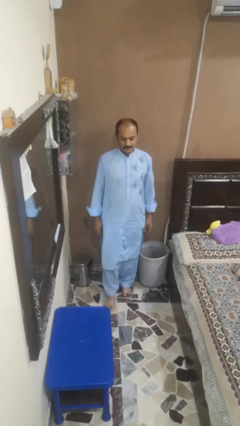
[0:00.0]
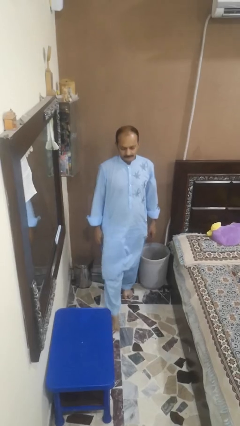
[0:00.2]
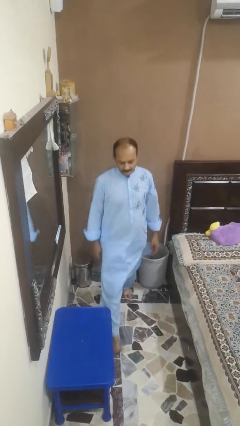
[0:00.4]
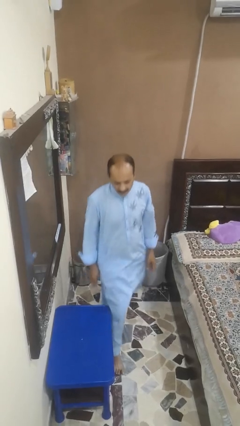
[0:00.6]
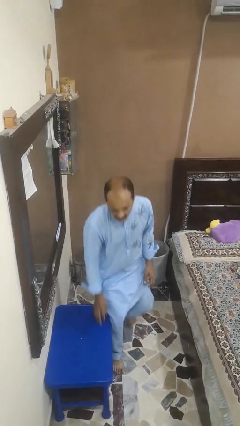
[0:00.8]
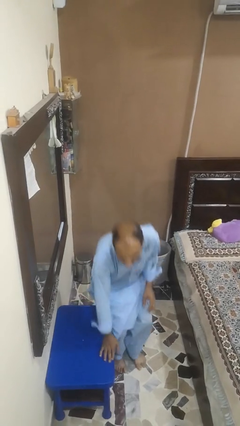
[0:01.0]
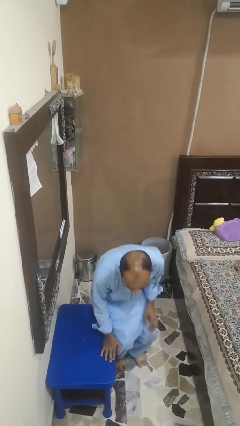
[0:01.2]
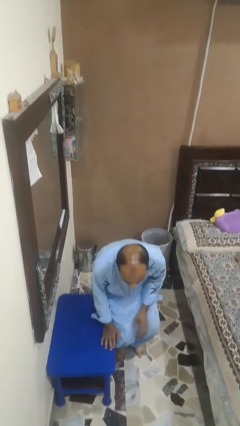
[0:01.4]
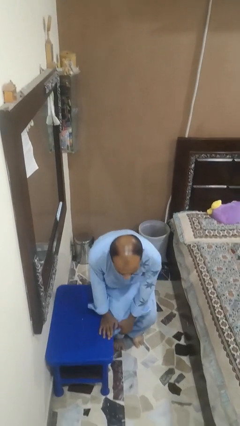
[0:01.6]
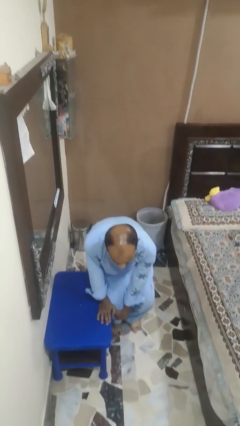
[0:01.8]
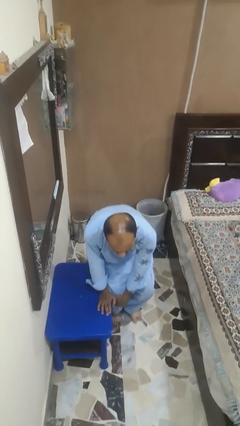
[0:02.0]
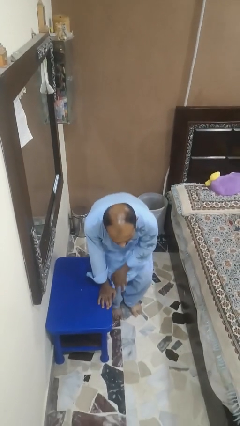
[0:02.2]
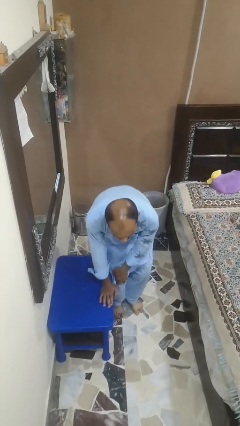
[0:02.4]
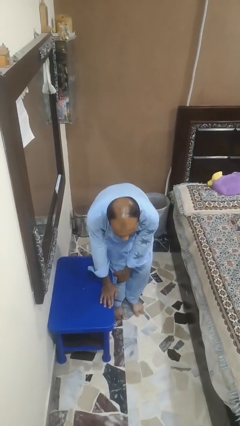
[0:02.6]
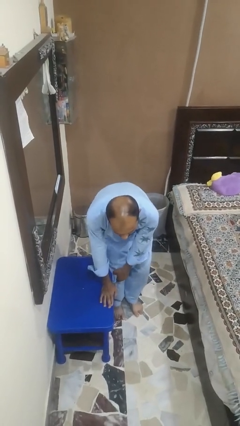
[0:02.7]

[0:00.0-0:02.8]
person bumps into table

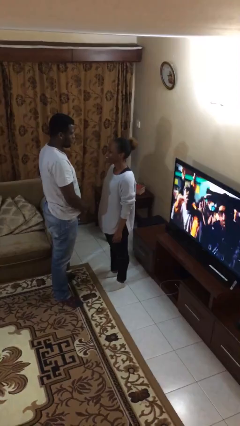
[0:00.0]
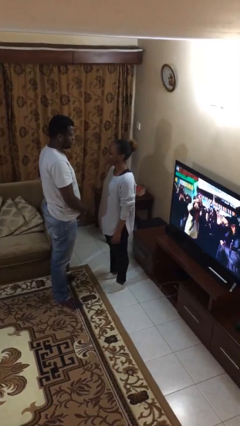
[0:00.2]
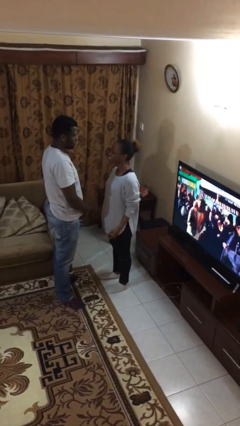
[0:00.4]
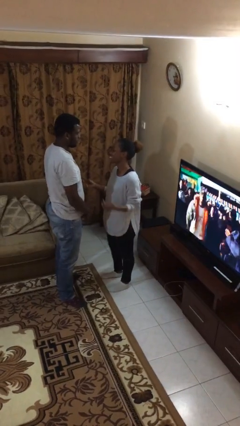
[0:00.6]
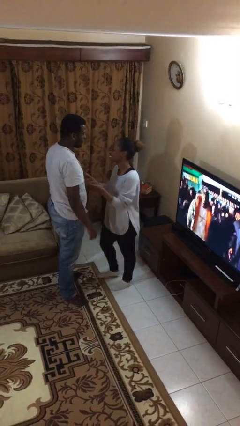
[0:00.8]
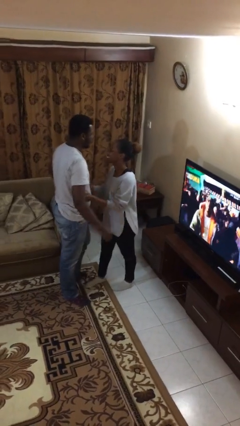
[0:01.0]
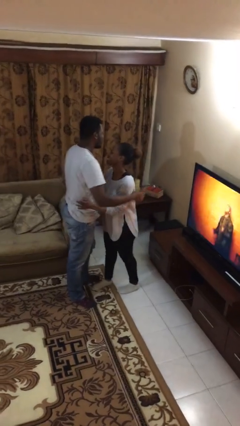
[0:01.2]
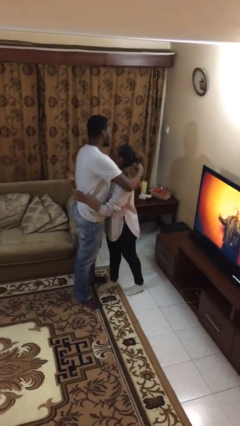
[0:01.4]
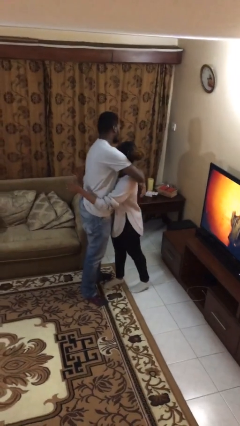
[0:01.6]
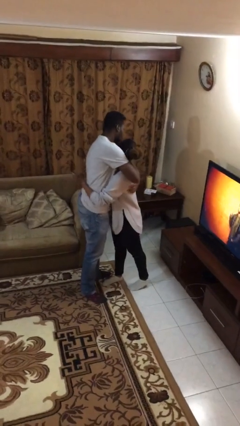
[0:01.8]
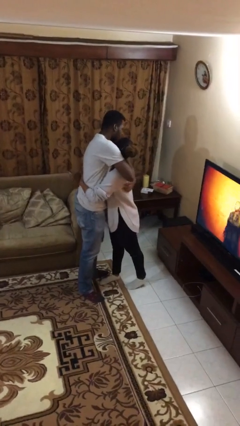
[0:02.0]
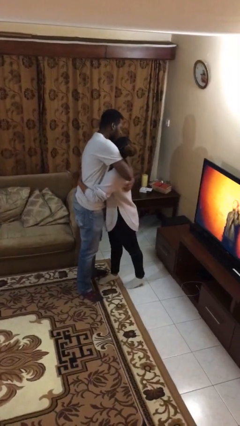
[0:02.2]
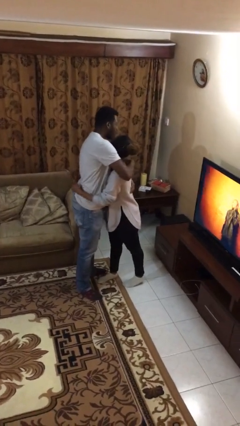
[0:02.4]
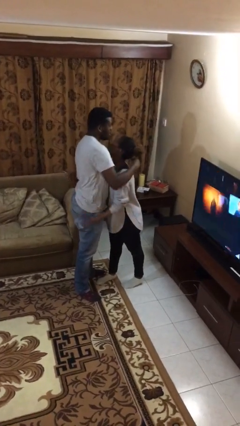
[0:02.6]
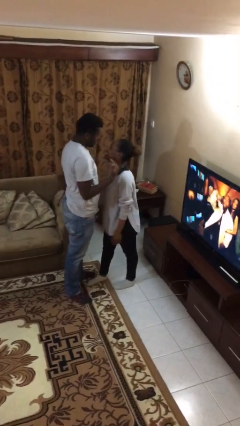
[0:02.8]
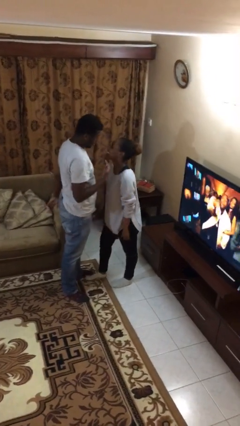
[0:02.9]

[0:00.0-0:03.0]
person embraces person

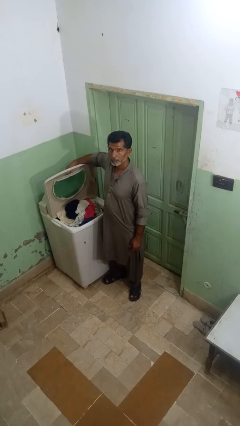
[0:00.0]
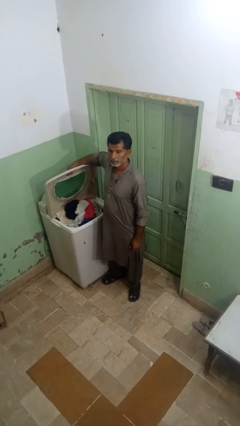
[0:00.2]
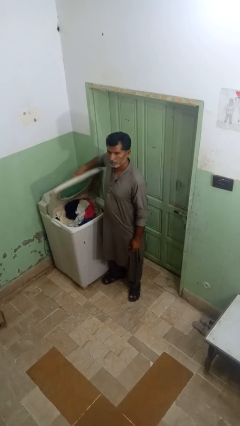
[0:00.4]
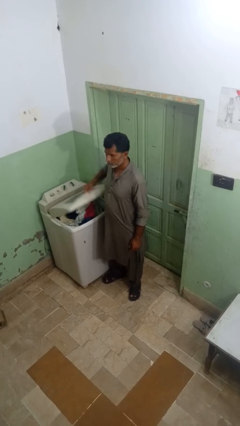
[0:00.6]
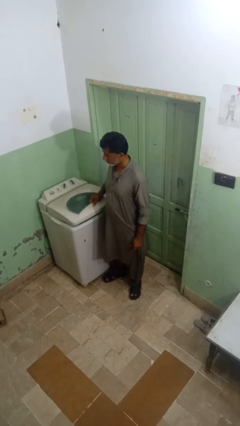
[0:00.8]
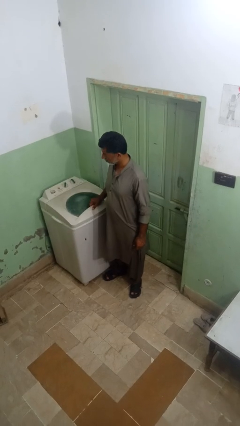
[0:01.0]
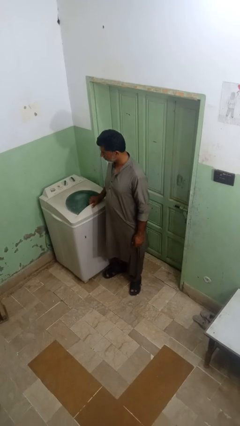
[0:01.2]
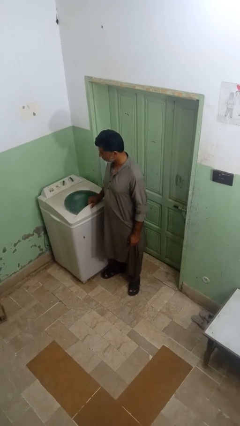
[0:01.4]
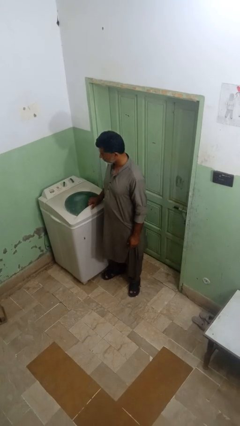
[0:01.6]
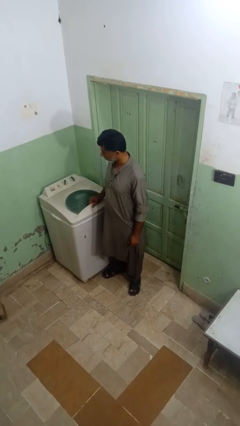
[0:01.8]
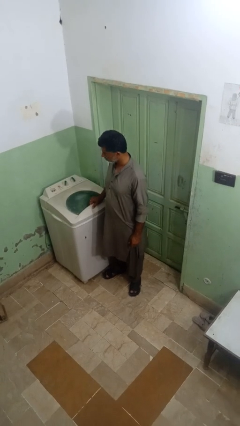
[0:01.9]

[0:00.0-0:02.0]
person closes clothes washer

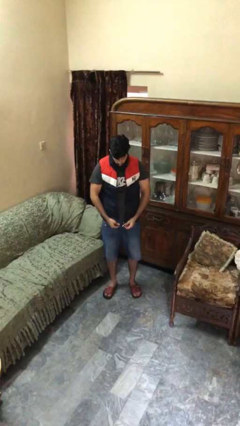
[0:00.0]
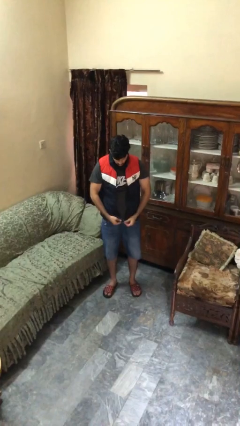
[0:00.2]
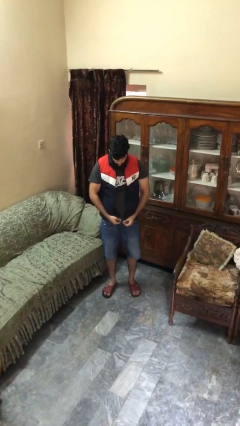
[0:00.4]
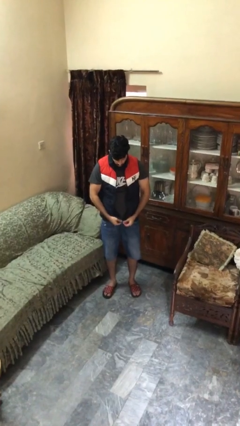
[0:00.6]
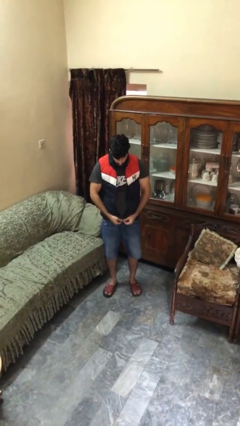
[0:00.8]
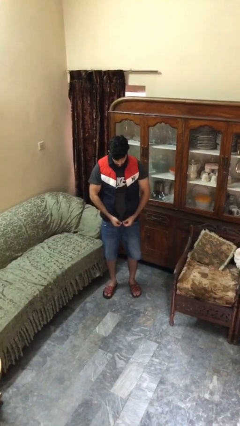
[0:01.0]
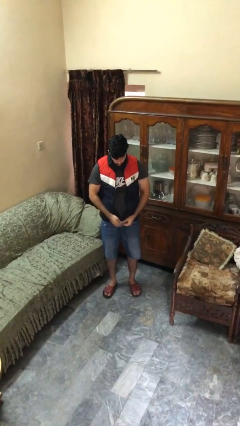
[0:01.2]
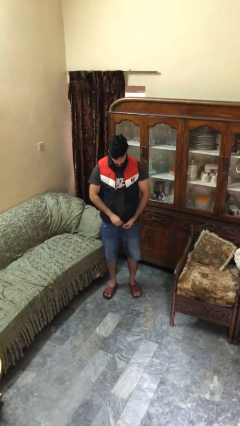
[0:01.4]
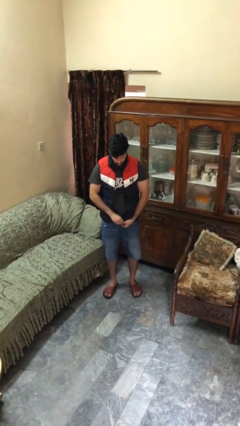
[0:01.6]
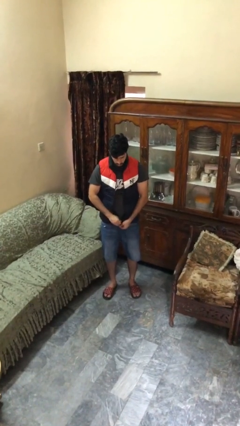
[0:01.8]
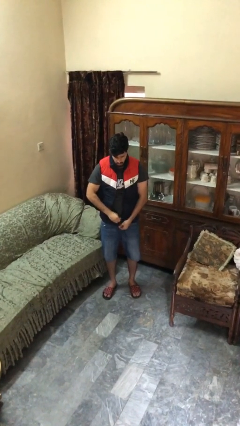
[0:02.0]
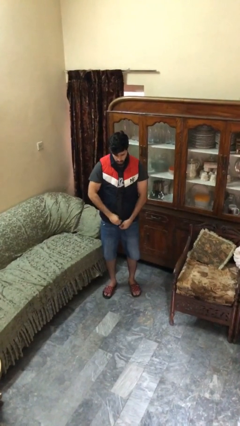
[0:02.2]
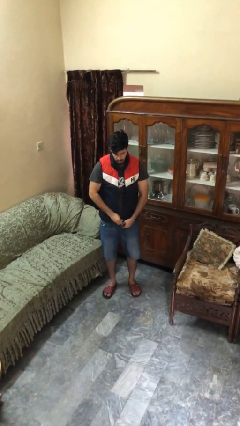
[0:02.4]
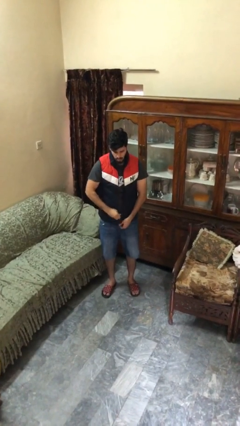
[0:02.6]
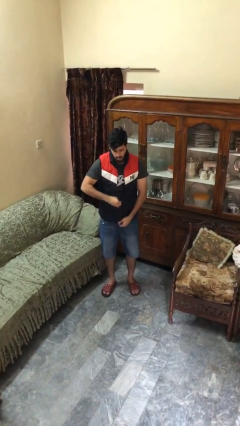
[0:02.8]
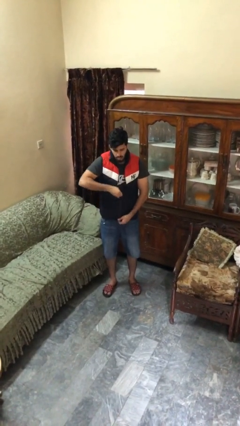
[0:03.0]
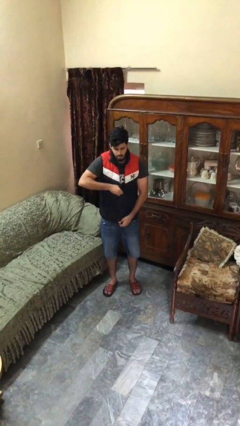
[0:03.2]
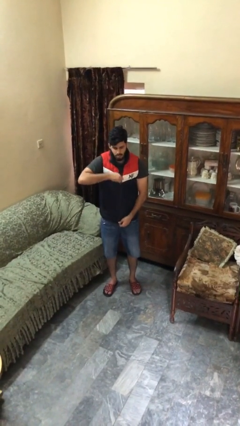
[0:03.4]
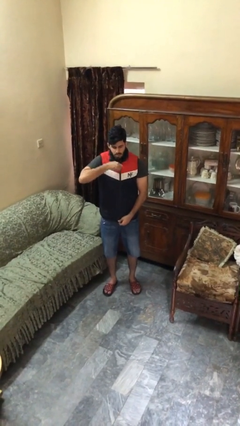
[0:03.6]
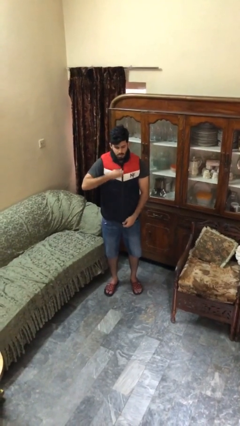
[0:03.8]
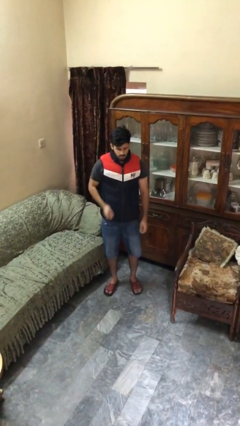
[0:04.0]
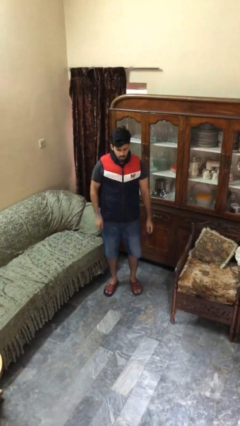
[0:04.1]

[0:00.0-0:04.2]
person zips up jacket

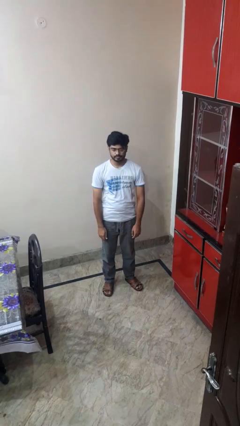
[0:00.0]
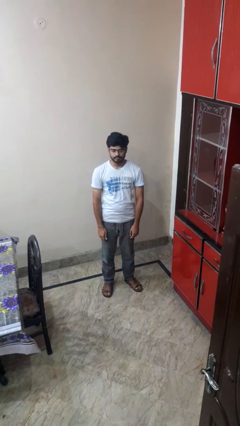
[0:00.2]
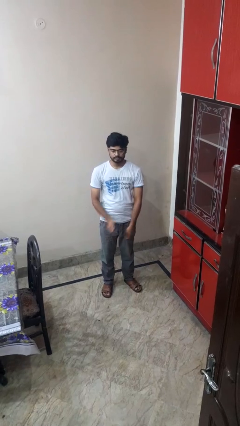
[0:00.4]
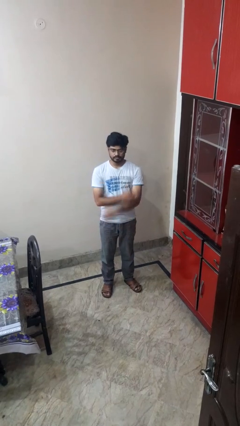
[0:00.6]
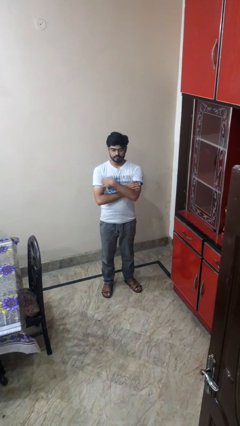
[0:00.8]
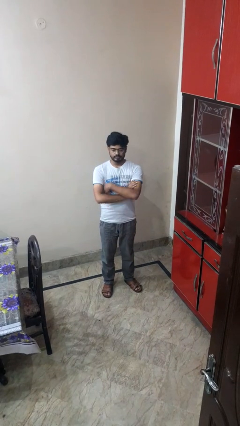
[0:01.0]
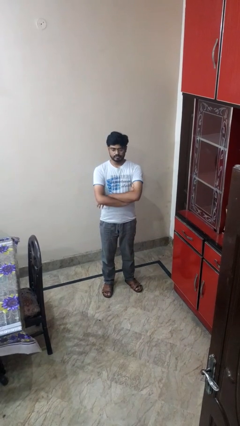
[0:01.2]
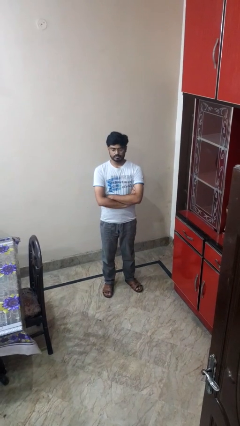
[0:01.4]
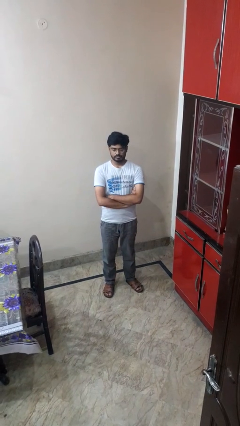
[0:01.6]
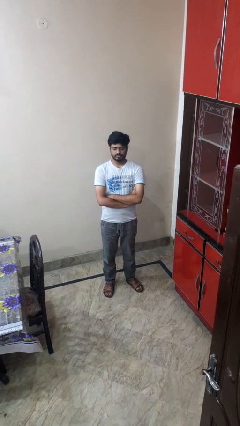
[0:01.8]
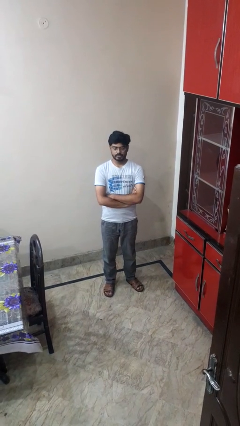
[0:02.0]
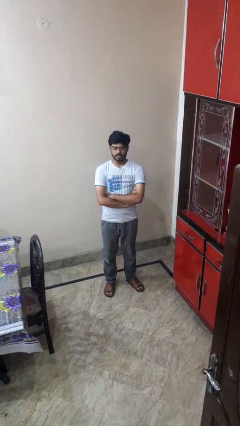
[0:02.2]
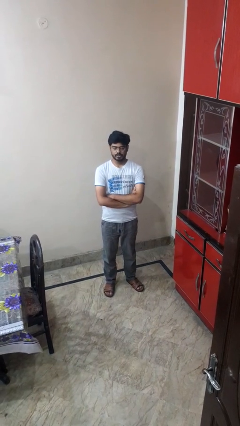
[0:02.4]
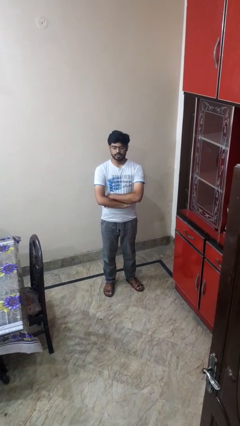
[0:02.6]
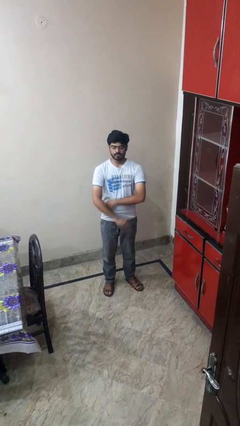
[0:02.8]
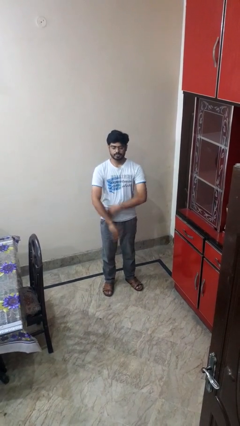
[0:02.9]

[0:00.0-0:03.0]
person crosses arms

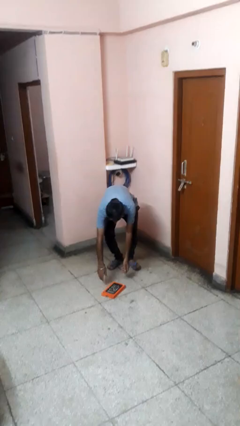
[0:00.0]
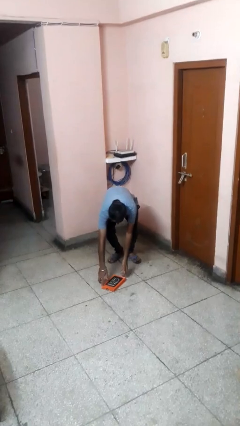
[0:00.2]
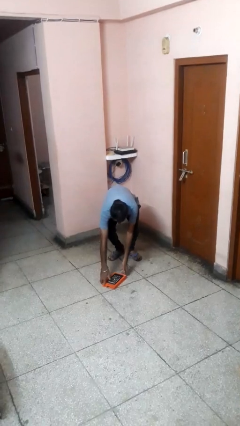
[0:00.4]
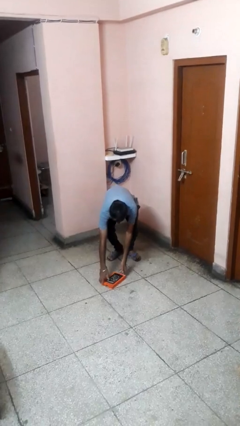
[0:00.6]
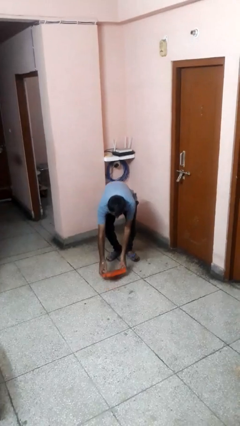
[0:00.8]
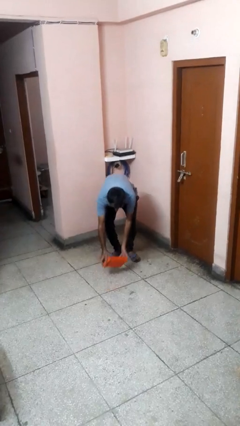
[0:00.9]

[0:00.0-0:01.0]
person picks up object from floor

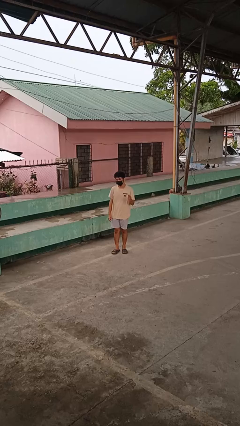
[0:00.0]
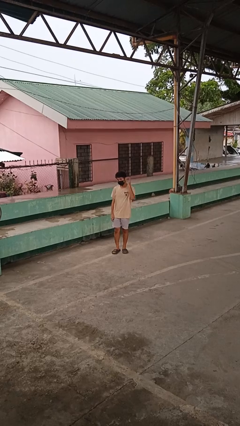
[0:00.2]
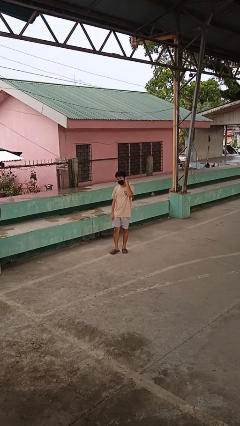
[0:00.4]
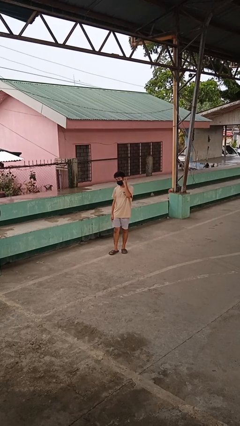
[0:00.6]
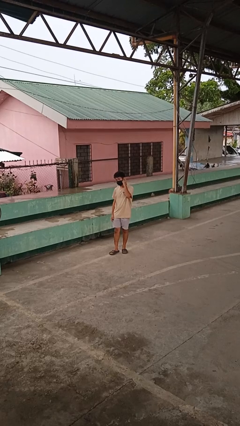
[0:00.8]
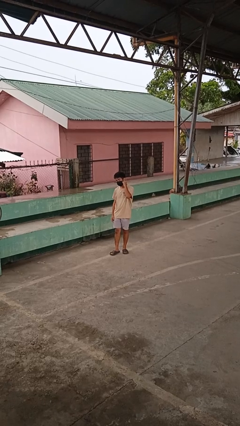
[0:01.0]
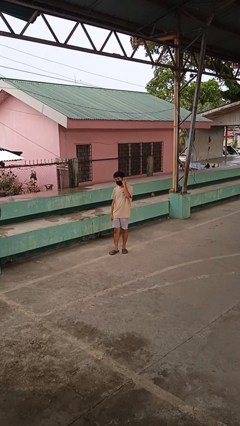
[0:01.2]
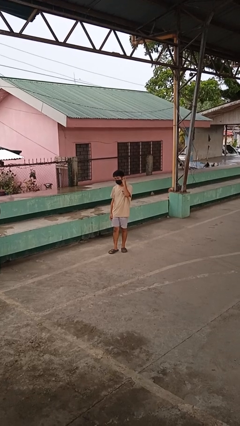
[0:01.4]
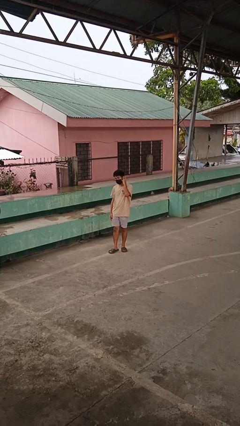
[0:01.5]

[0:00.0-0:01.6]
person gestures listen closely
